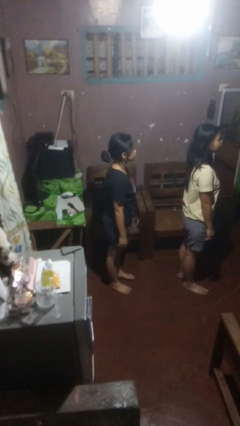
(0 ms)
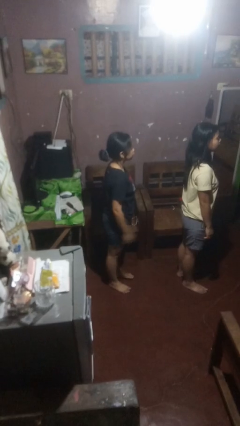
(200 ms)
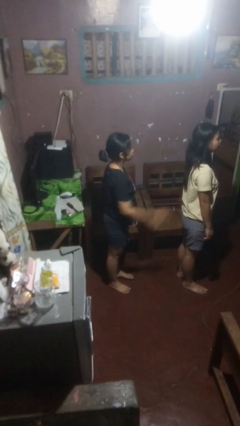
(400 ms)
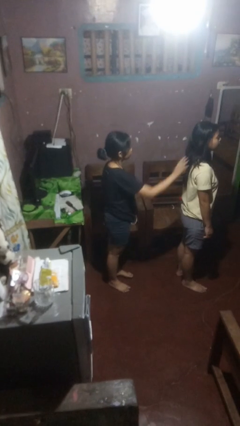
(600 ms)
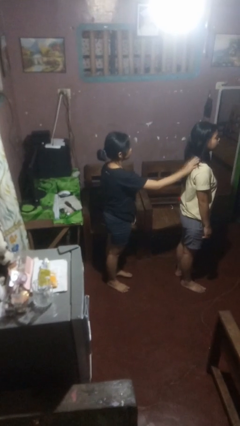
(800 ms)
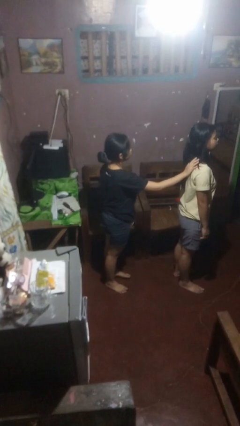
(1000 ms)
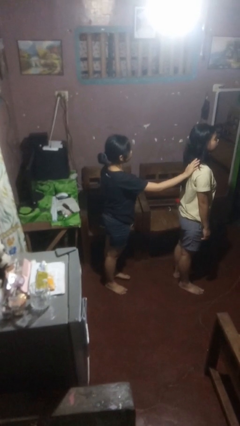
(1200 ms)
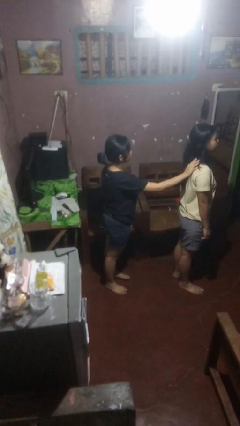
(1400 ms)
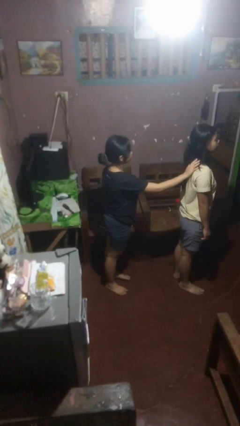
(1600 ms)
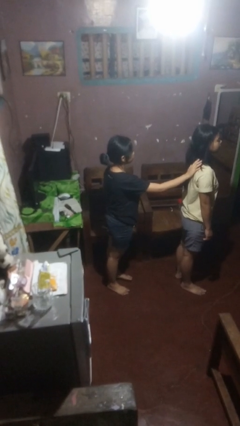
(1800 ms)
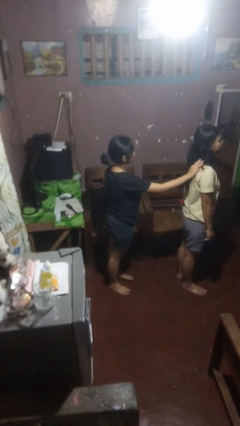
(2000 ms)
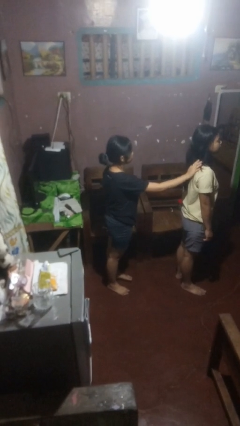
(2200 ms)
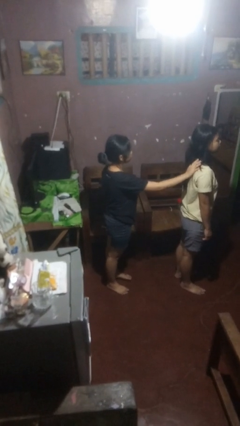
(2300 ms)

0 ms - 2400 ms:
person touches back of person

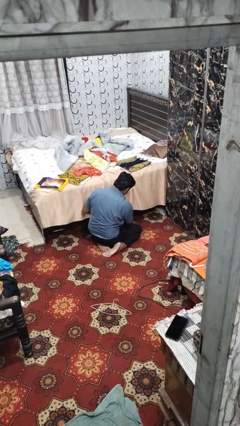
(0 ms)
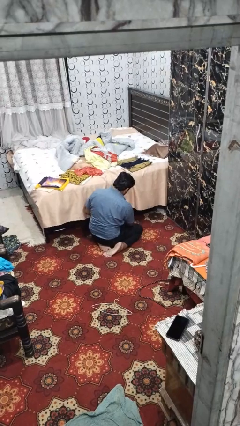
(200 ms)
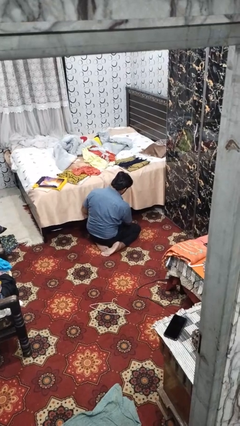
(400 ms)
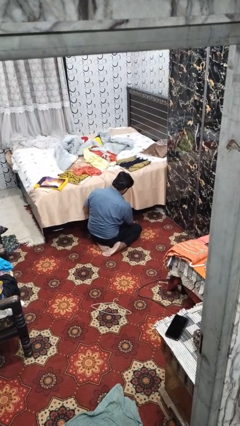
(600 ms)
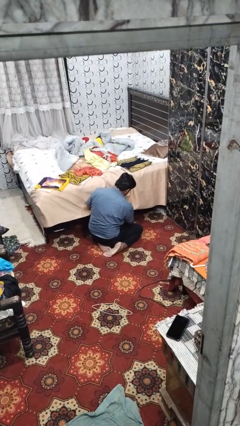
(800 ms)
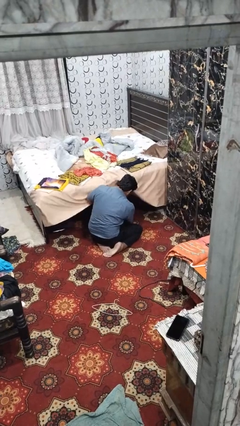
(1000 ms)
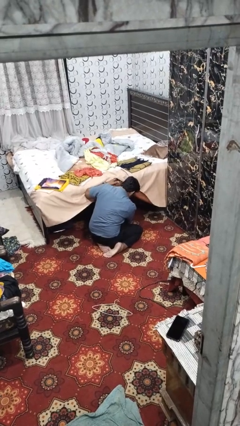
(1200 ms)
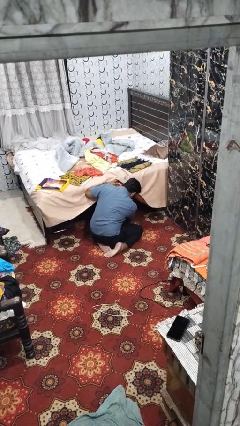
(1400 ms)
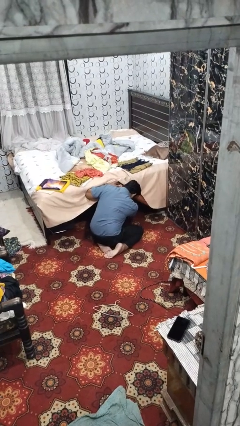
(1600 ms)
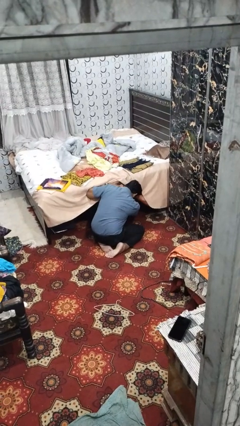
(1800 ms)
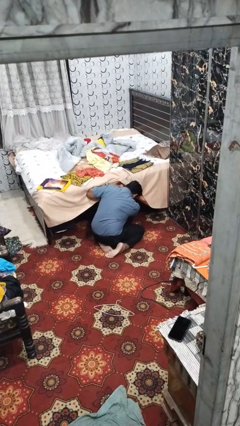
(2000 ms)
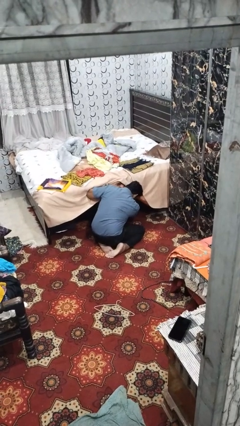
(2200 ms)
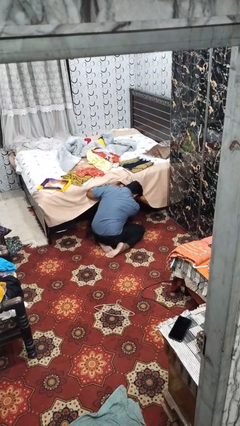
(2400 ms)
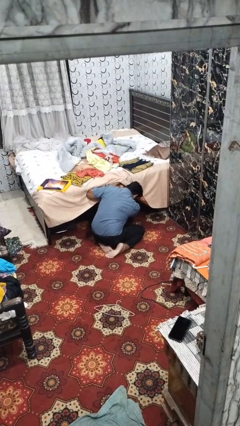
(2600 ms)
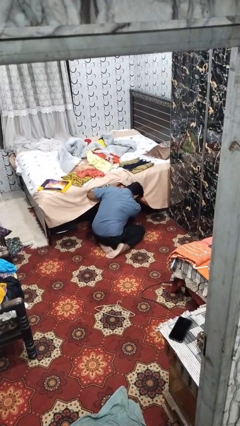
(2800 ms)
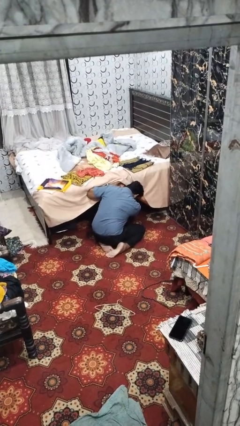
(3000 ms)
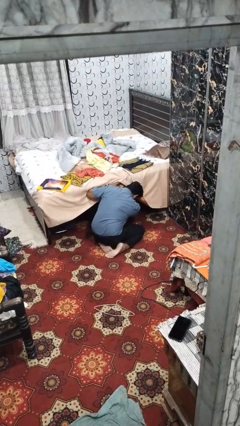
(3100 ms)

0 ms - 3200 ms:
person searches under bed

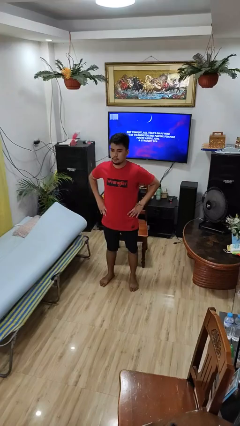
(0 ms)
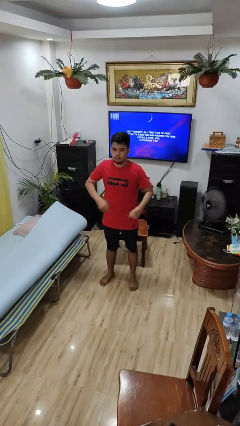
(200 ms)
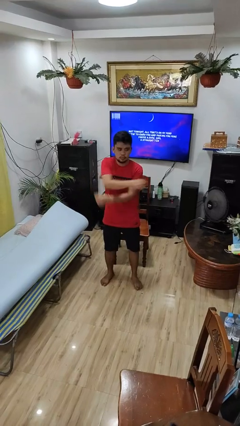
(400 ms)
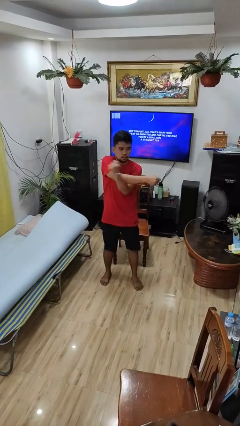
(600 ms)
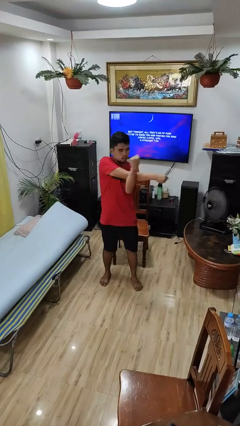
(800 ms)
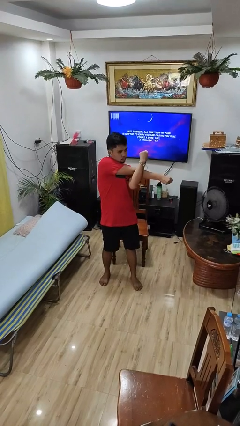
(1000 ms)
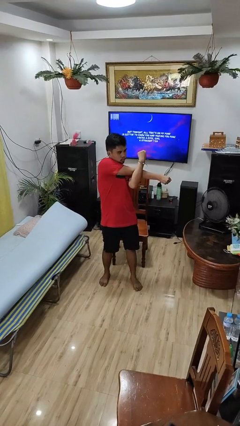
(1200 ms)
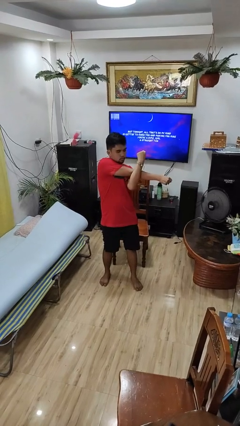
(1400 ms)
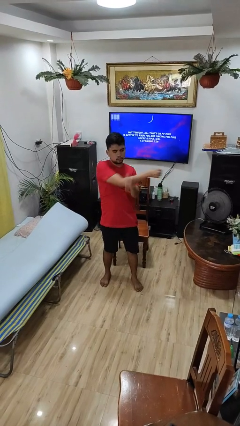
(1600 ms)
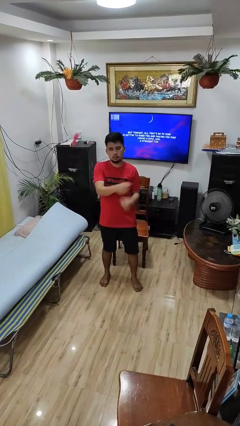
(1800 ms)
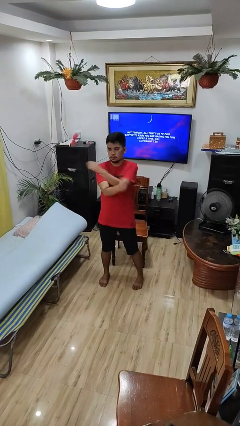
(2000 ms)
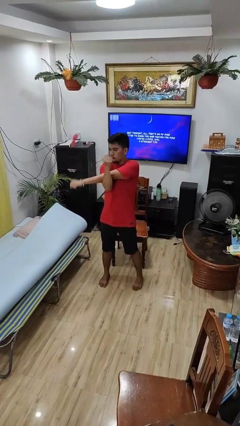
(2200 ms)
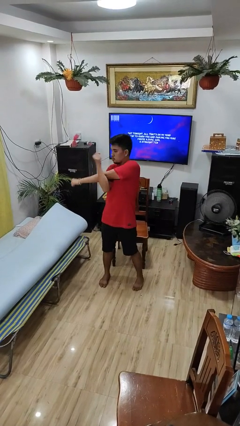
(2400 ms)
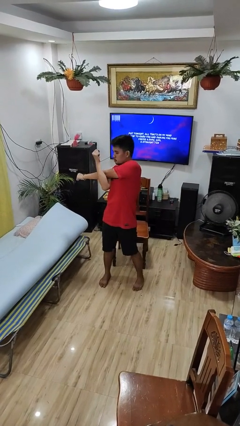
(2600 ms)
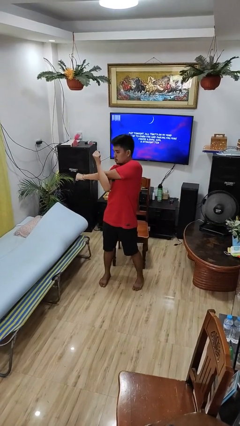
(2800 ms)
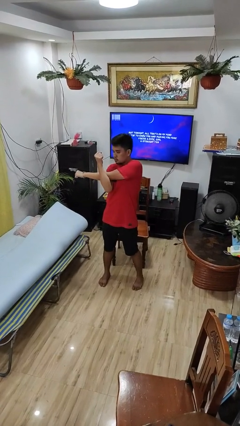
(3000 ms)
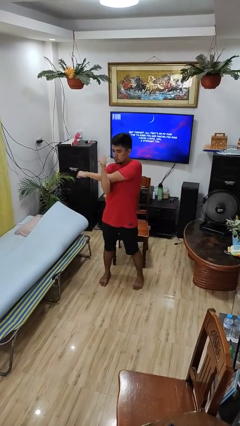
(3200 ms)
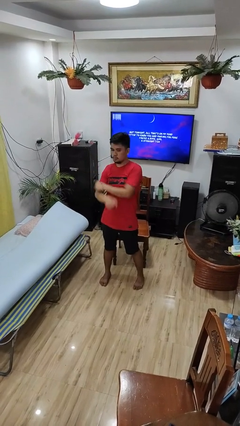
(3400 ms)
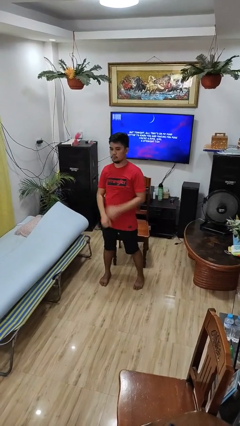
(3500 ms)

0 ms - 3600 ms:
person stretches arms to side

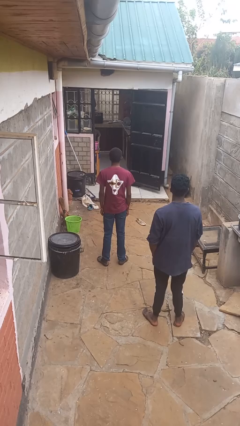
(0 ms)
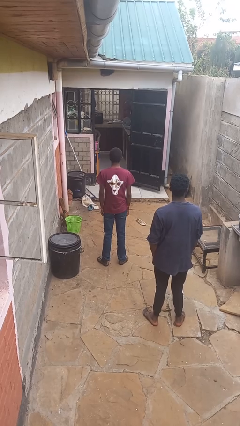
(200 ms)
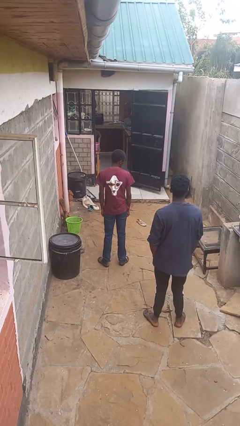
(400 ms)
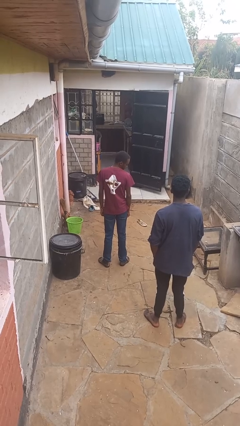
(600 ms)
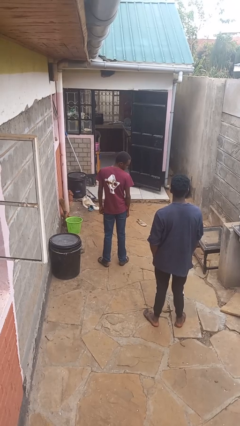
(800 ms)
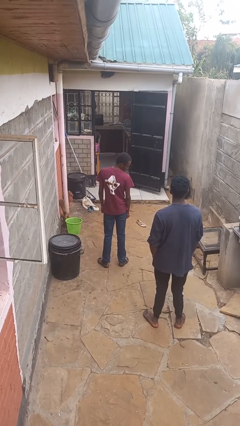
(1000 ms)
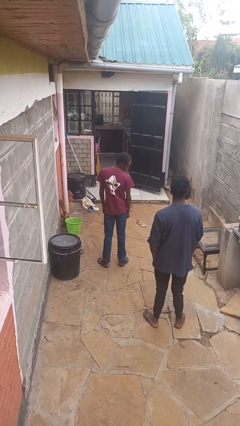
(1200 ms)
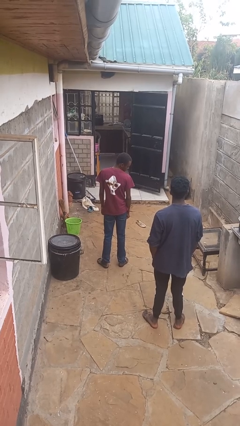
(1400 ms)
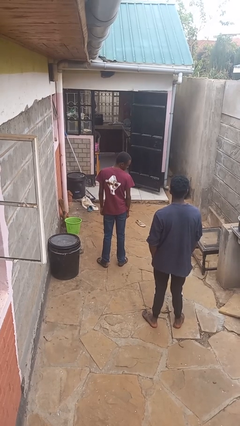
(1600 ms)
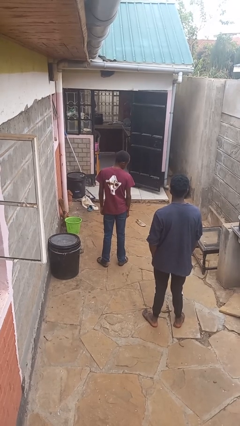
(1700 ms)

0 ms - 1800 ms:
person looks over shoulder

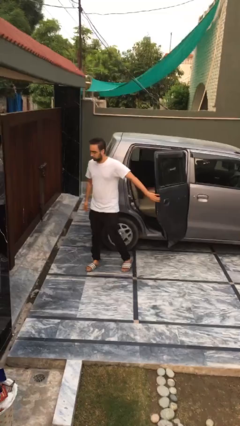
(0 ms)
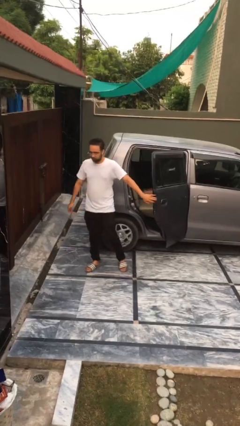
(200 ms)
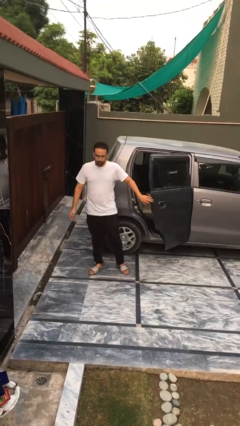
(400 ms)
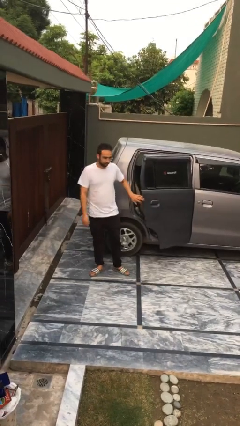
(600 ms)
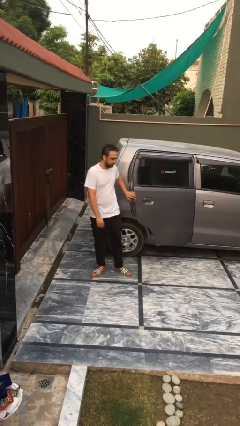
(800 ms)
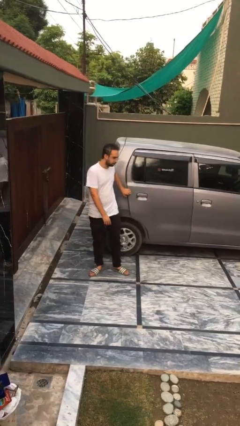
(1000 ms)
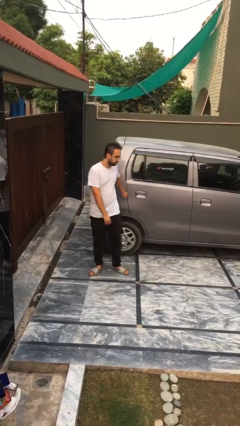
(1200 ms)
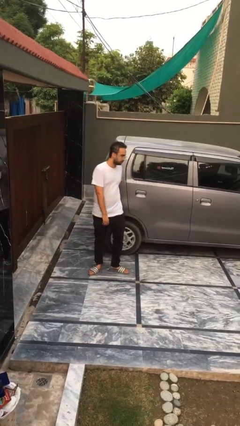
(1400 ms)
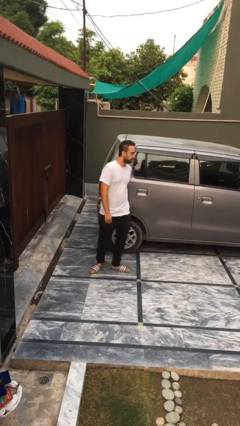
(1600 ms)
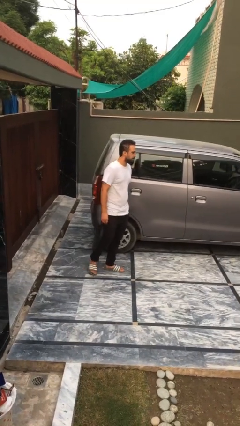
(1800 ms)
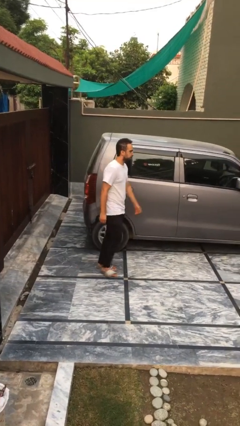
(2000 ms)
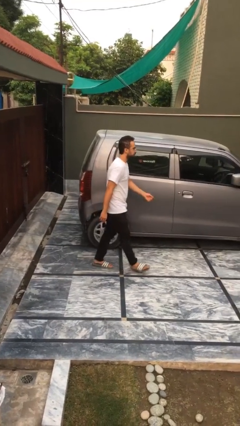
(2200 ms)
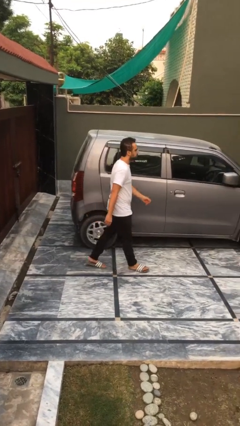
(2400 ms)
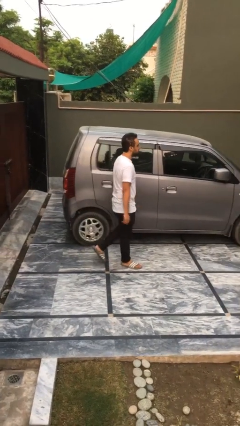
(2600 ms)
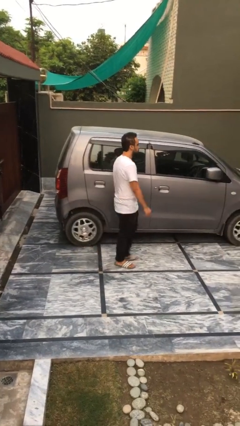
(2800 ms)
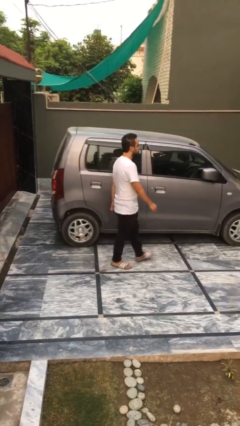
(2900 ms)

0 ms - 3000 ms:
person closes car door

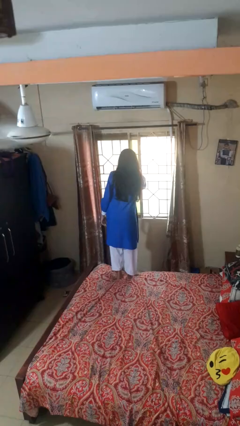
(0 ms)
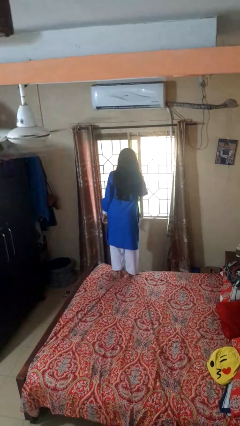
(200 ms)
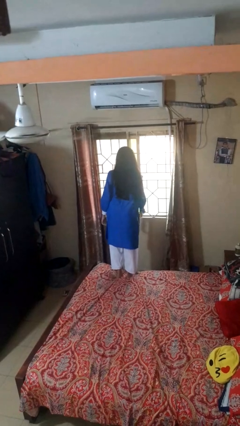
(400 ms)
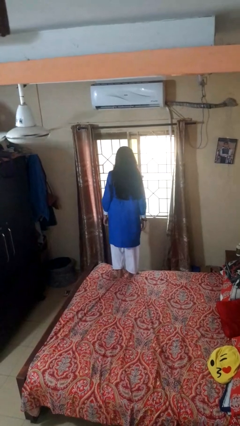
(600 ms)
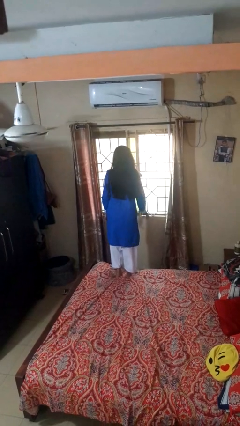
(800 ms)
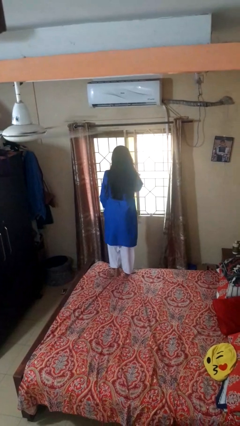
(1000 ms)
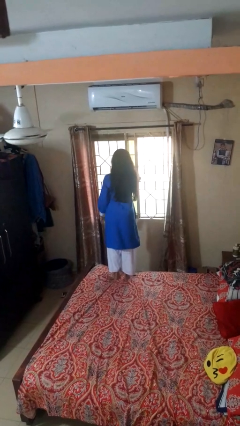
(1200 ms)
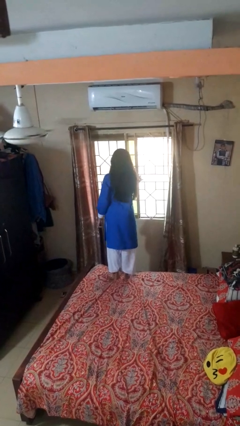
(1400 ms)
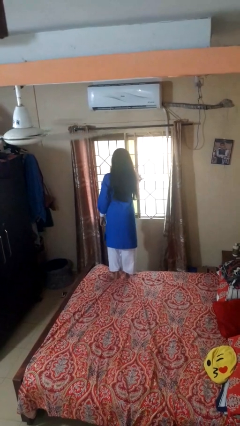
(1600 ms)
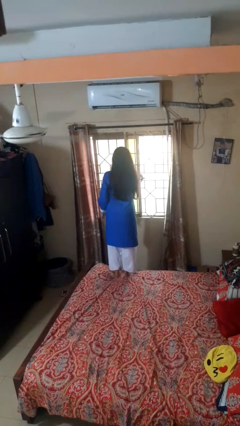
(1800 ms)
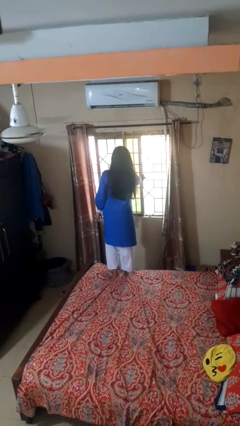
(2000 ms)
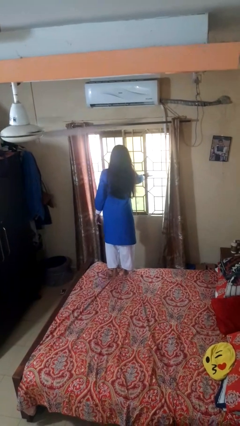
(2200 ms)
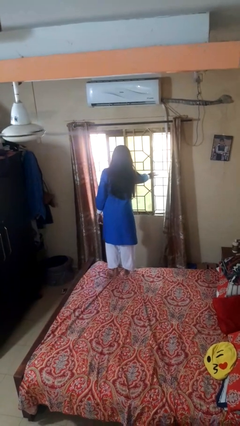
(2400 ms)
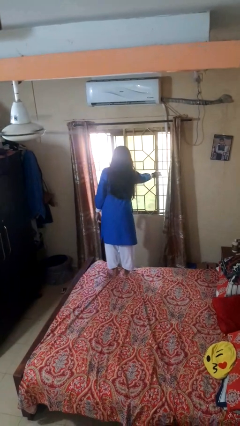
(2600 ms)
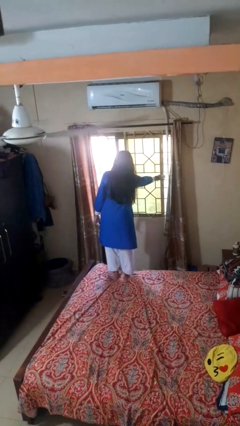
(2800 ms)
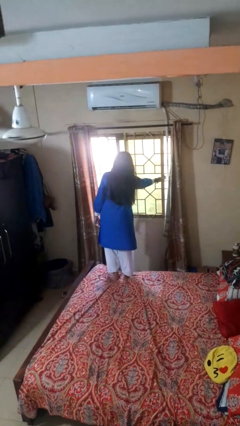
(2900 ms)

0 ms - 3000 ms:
person opens home window

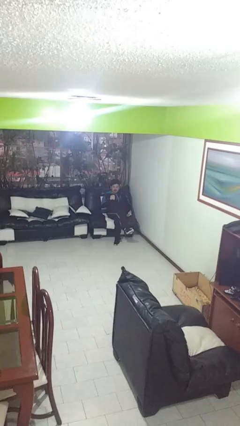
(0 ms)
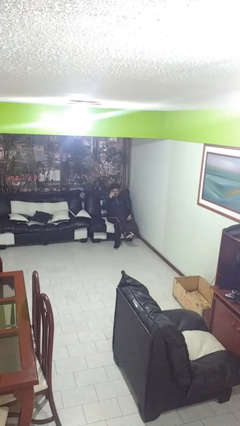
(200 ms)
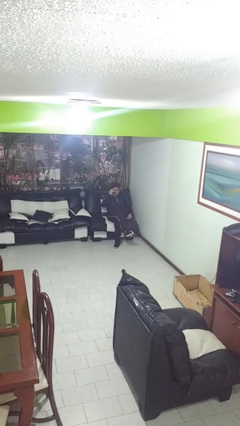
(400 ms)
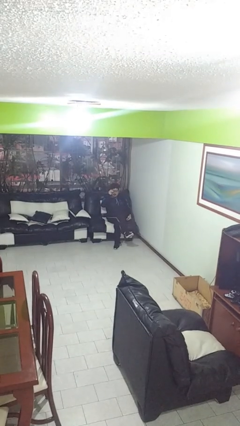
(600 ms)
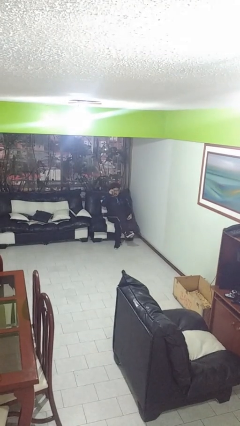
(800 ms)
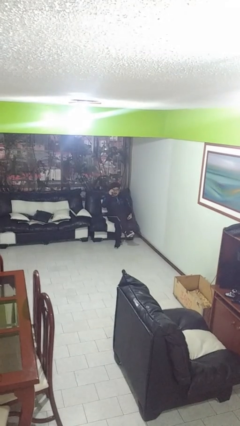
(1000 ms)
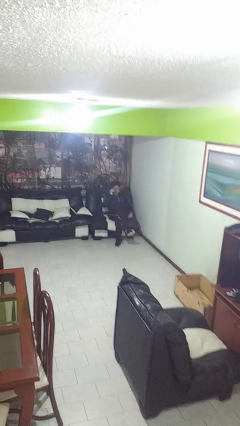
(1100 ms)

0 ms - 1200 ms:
person puts on glasses
